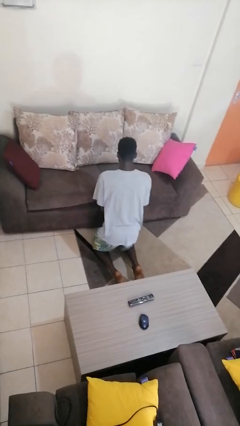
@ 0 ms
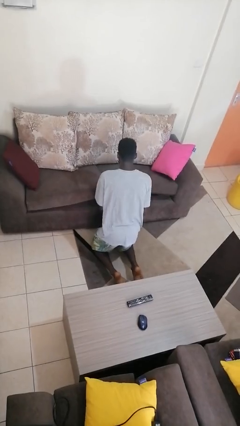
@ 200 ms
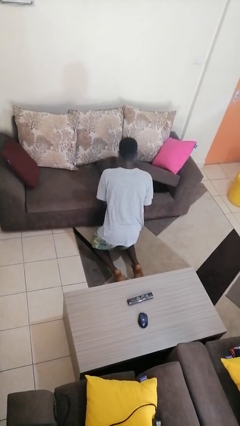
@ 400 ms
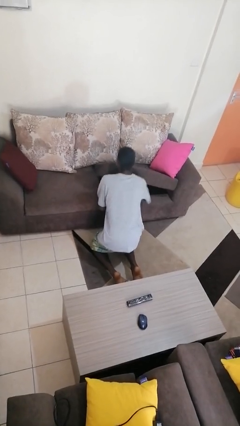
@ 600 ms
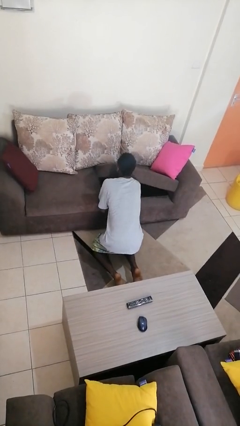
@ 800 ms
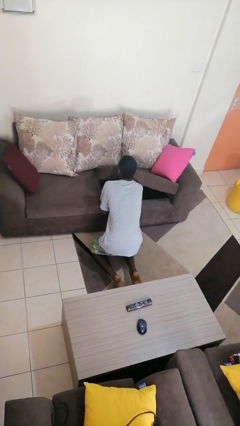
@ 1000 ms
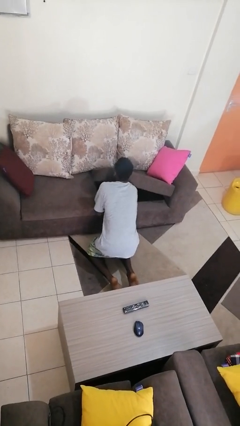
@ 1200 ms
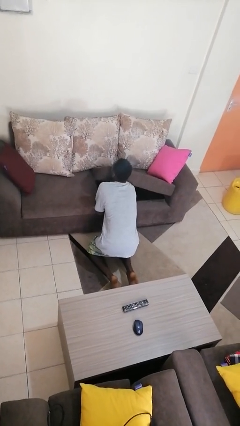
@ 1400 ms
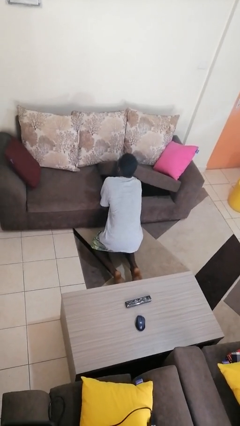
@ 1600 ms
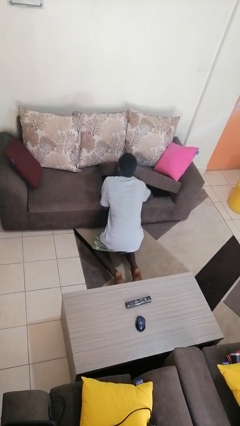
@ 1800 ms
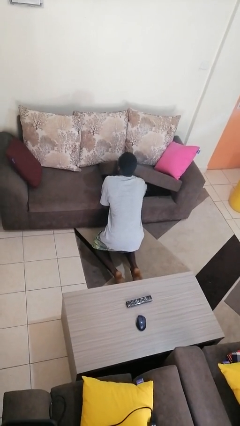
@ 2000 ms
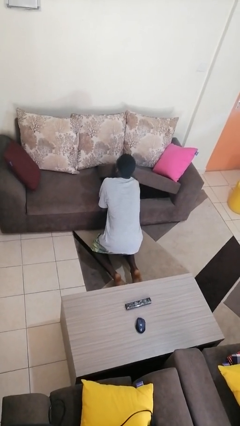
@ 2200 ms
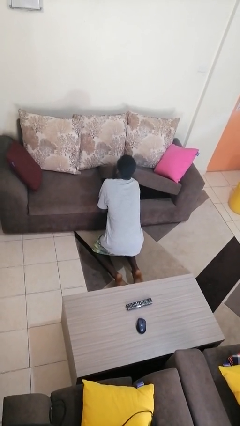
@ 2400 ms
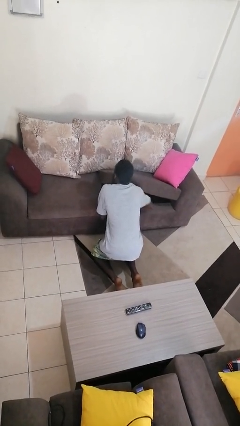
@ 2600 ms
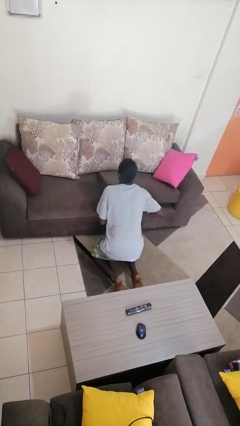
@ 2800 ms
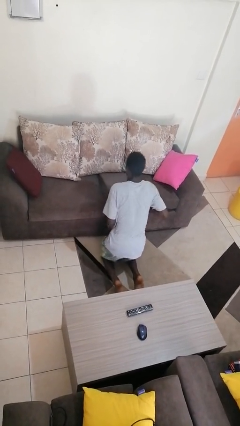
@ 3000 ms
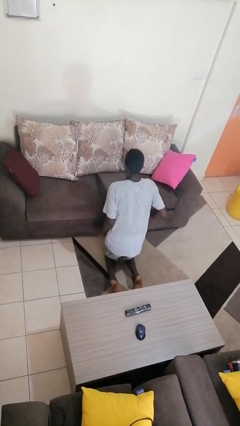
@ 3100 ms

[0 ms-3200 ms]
person searches under couch

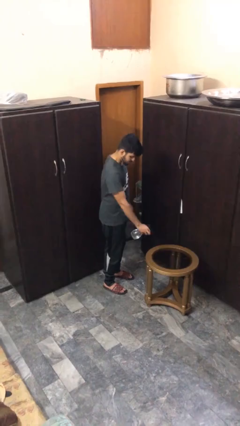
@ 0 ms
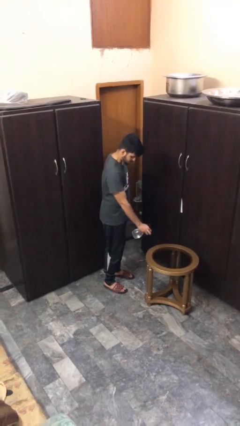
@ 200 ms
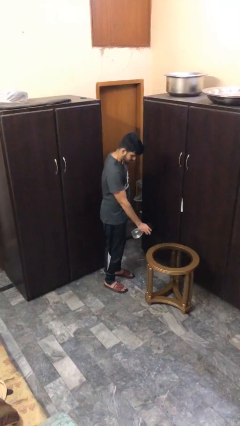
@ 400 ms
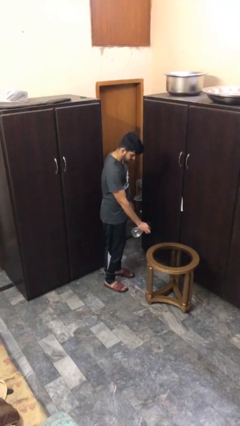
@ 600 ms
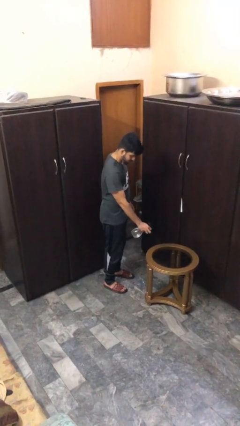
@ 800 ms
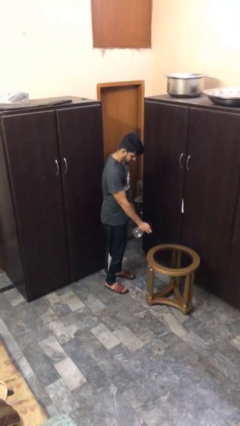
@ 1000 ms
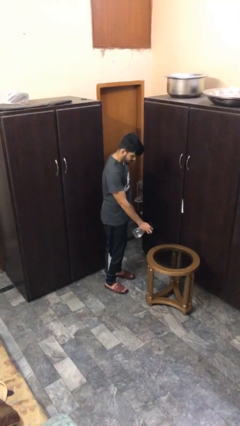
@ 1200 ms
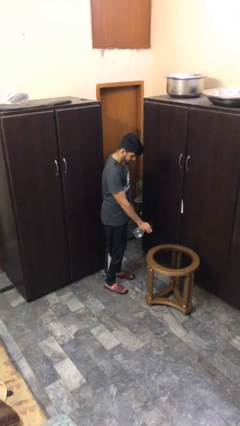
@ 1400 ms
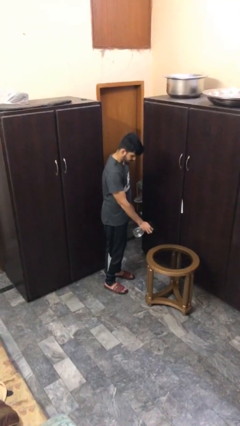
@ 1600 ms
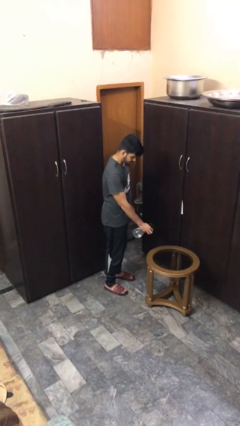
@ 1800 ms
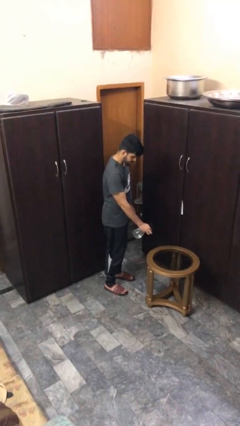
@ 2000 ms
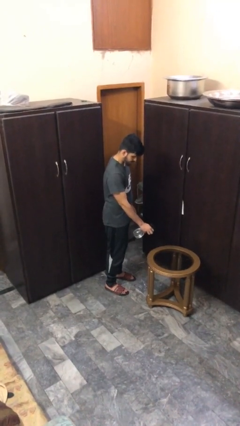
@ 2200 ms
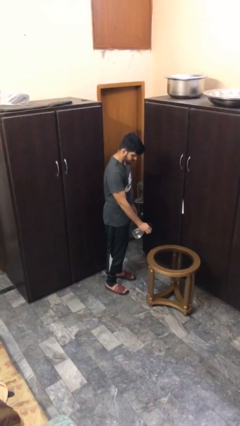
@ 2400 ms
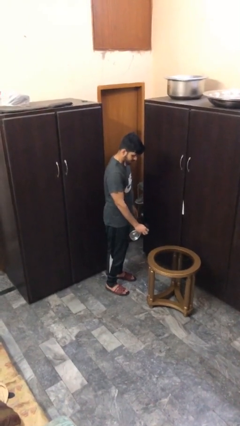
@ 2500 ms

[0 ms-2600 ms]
person sprays from bottle

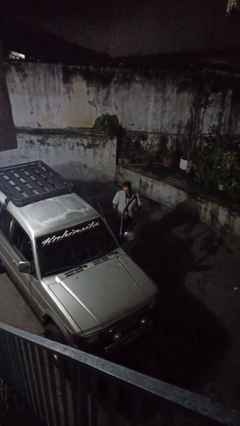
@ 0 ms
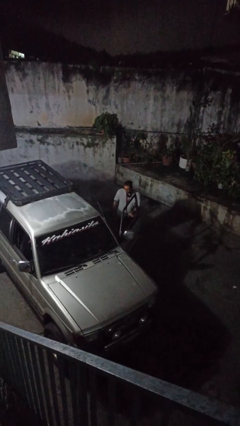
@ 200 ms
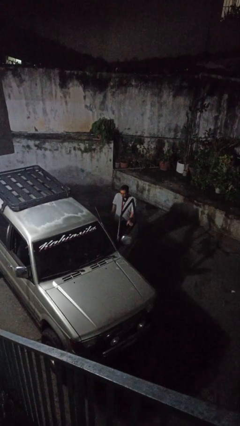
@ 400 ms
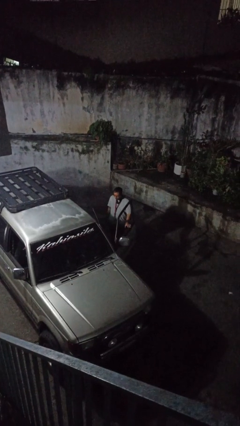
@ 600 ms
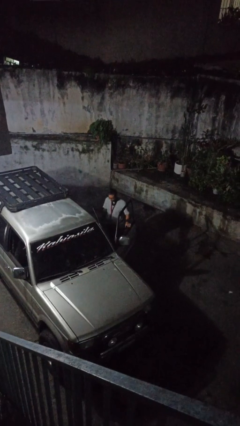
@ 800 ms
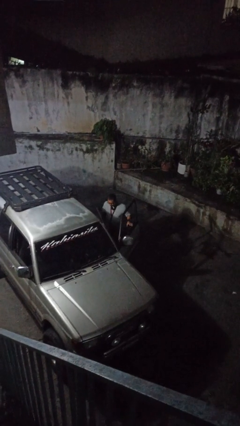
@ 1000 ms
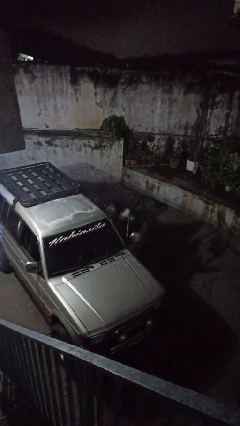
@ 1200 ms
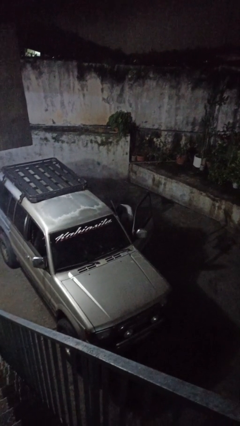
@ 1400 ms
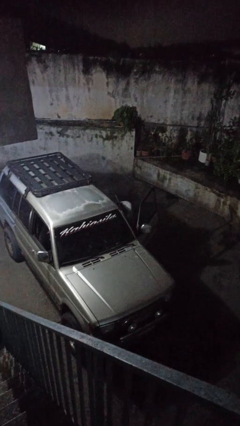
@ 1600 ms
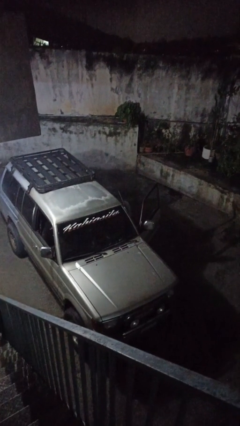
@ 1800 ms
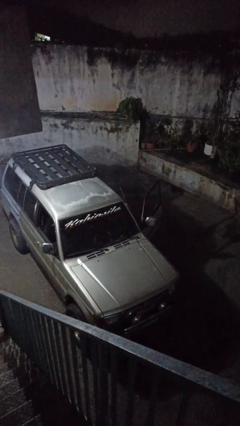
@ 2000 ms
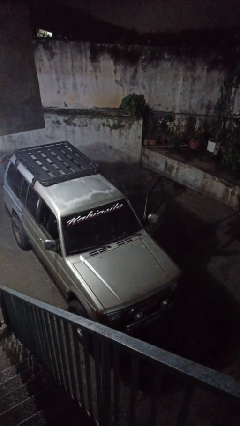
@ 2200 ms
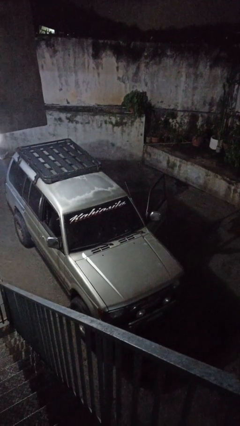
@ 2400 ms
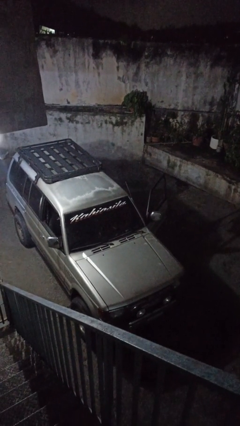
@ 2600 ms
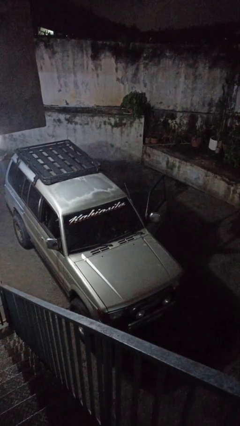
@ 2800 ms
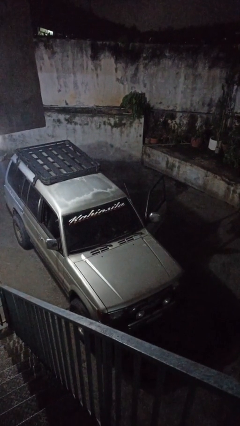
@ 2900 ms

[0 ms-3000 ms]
person enters car

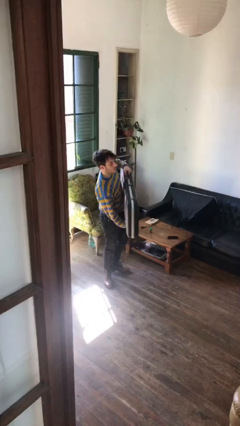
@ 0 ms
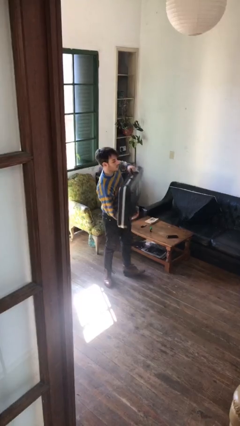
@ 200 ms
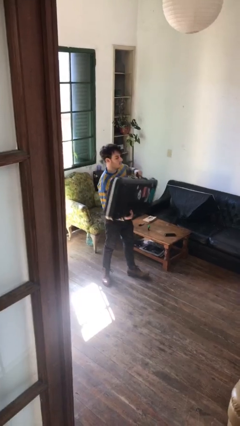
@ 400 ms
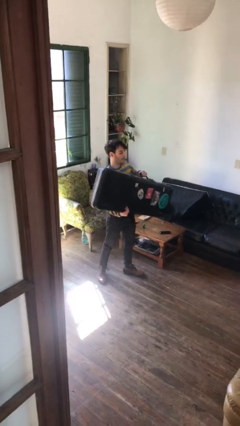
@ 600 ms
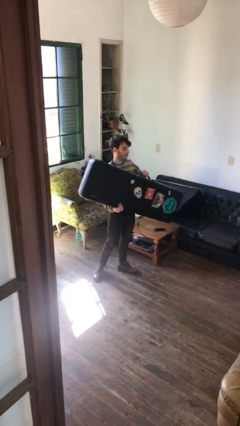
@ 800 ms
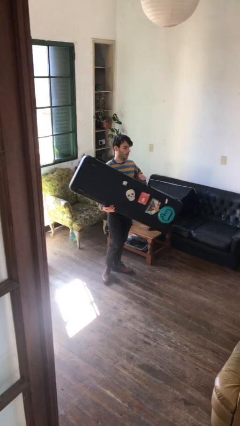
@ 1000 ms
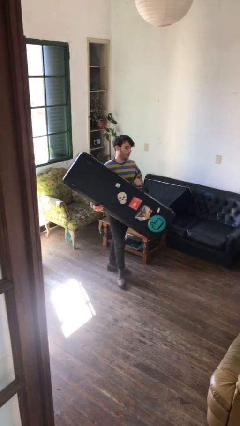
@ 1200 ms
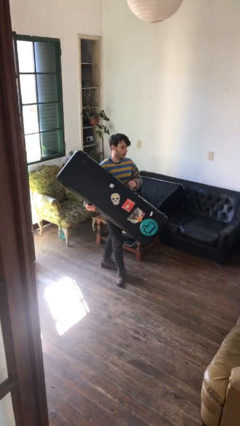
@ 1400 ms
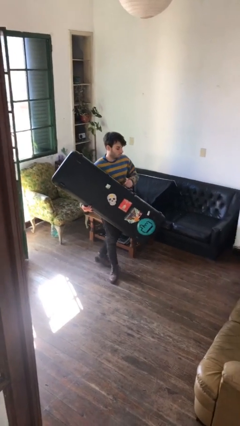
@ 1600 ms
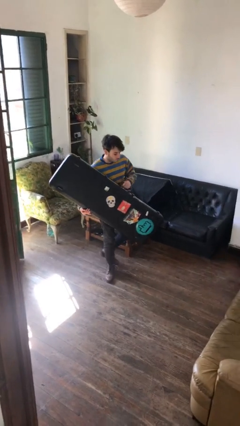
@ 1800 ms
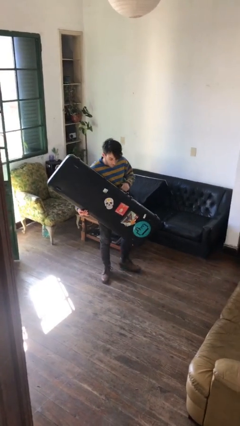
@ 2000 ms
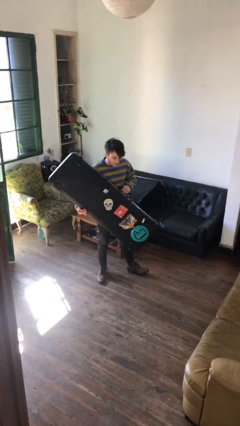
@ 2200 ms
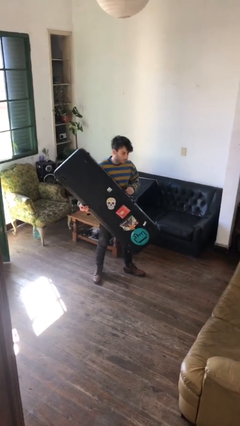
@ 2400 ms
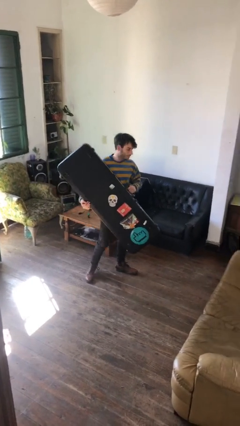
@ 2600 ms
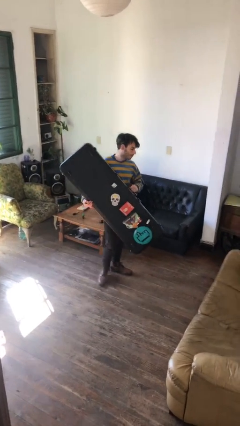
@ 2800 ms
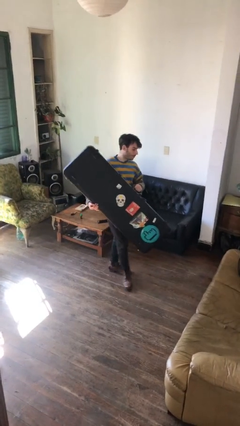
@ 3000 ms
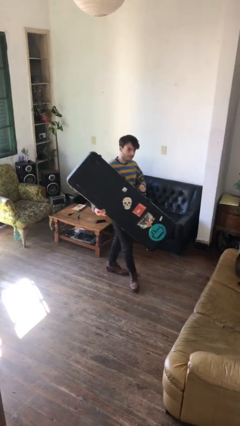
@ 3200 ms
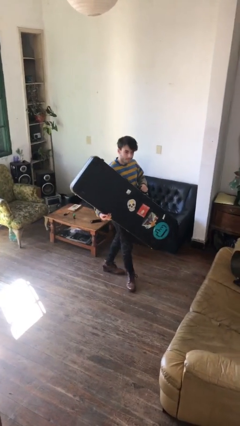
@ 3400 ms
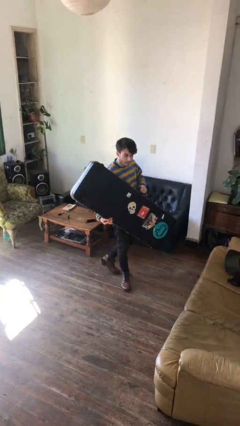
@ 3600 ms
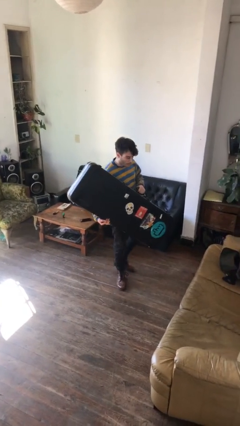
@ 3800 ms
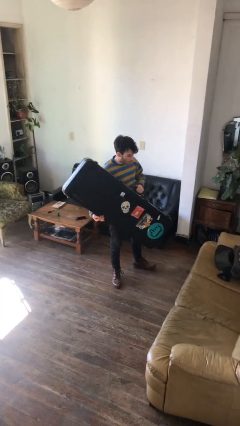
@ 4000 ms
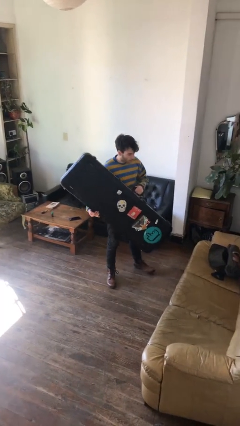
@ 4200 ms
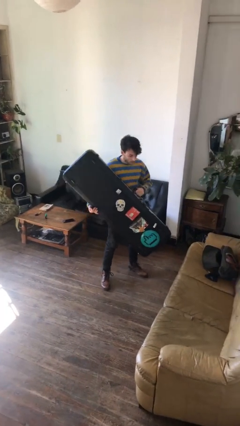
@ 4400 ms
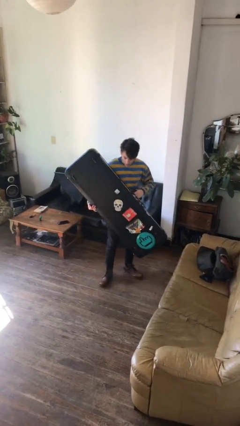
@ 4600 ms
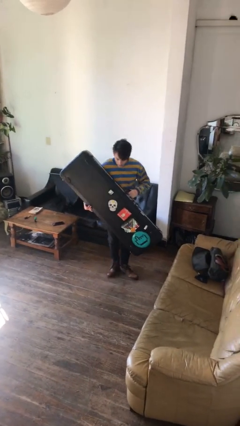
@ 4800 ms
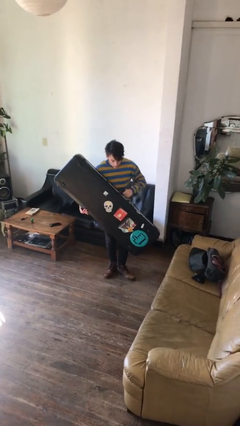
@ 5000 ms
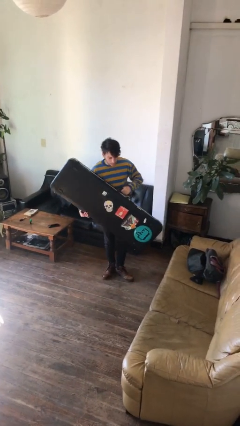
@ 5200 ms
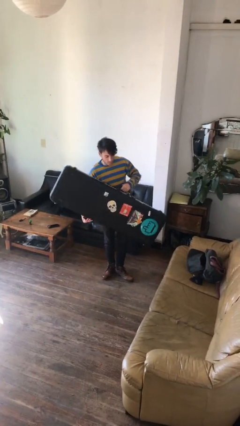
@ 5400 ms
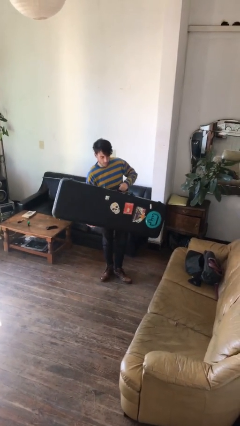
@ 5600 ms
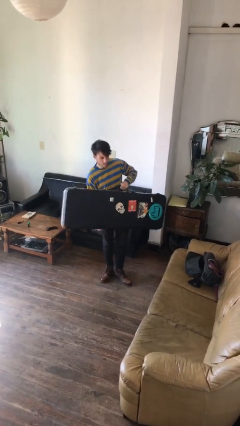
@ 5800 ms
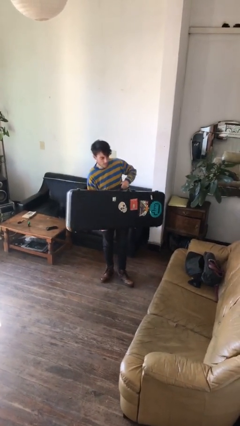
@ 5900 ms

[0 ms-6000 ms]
person carries heavy object

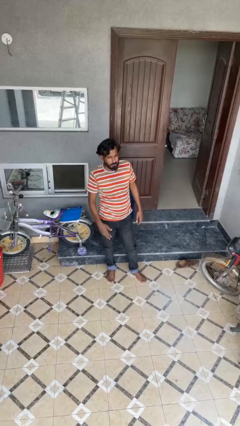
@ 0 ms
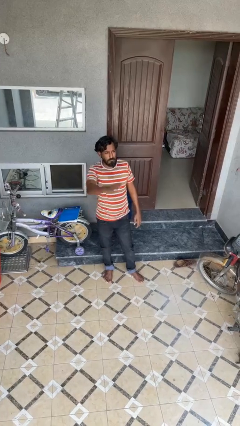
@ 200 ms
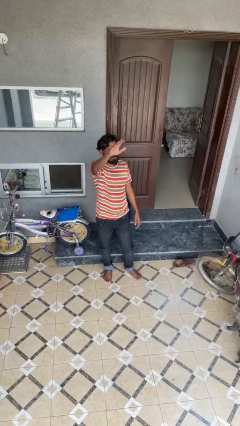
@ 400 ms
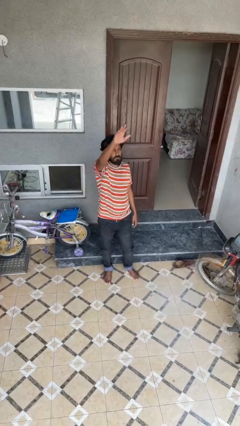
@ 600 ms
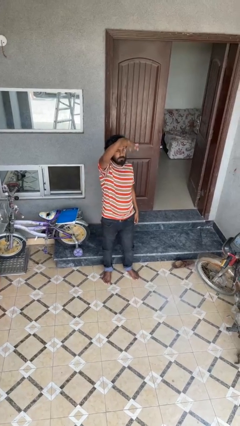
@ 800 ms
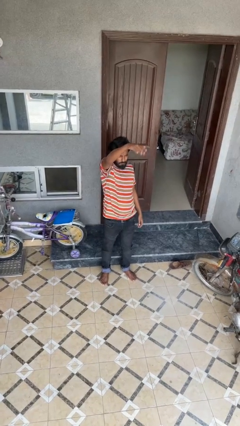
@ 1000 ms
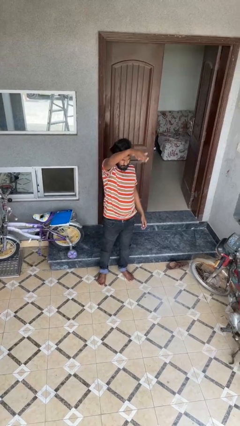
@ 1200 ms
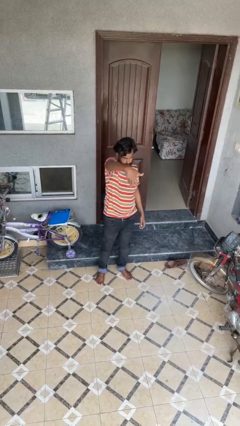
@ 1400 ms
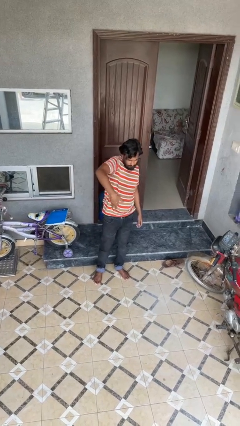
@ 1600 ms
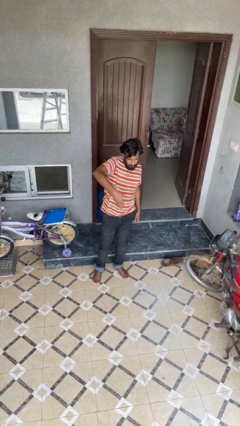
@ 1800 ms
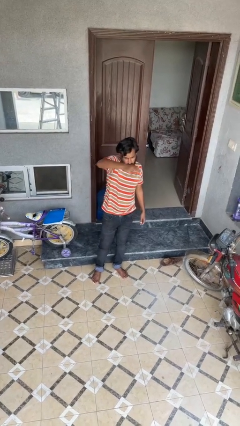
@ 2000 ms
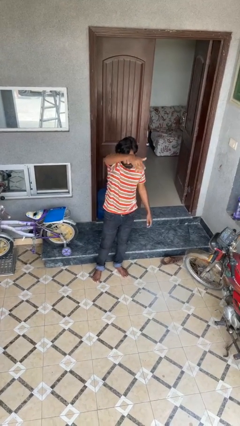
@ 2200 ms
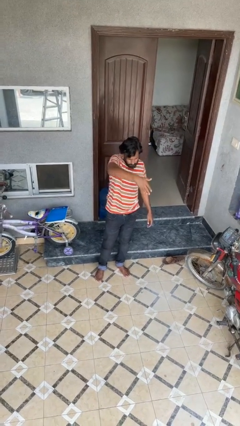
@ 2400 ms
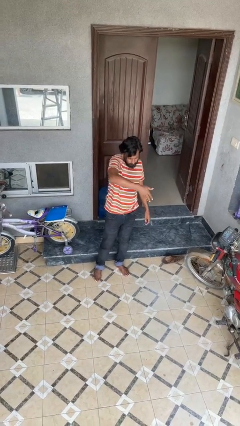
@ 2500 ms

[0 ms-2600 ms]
person gestures come here
